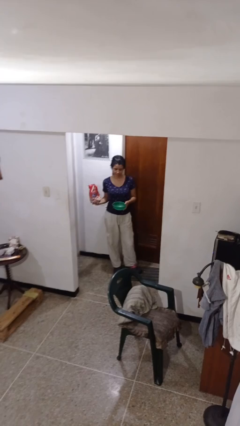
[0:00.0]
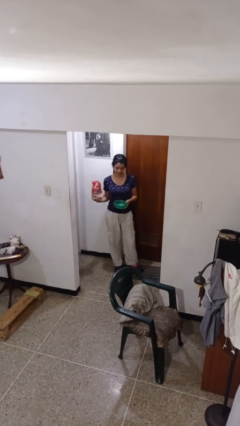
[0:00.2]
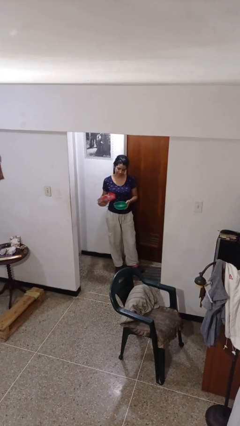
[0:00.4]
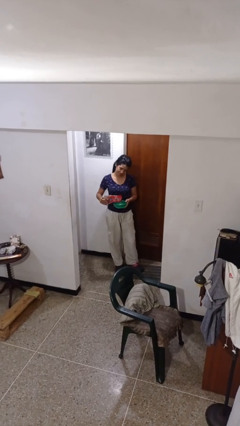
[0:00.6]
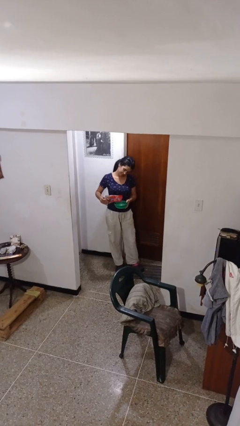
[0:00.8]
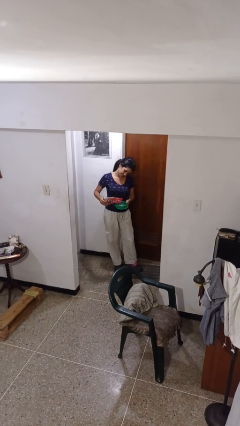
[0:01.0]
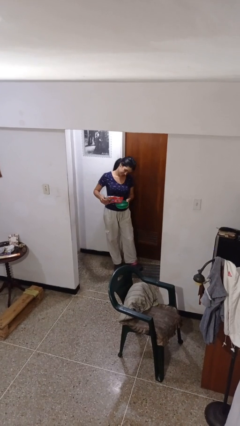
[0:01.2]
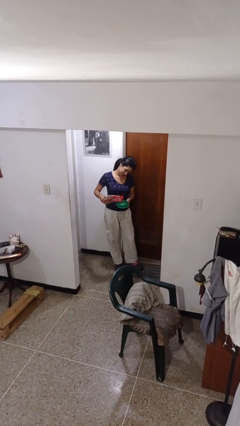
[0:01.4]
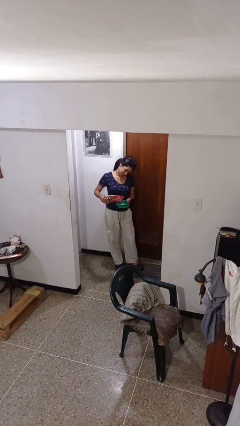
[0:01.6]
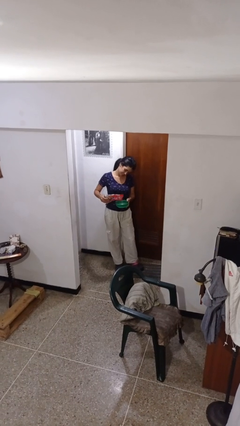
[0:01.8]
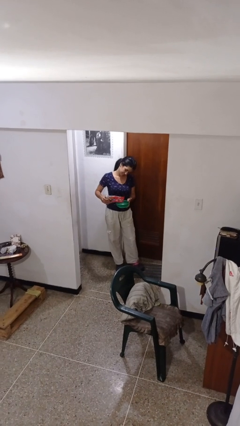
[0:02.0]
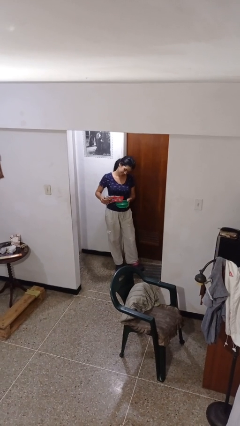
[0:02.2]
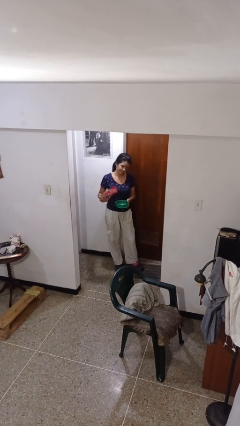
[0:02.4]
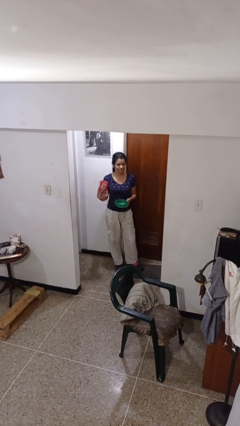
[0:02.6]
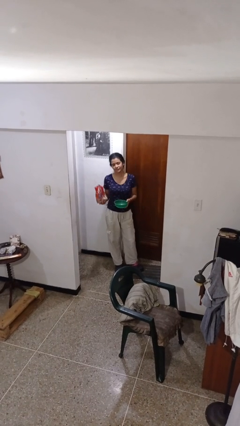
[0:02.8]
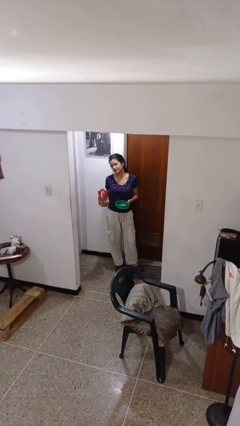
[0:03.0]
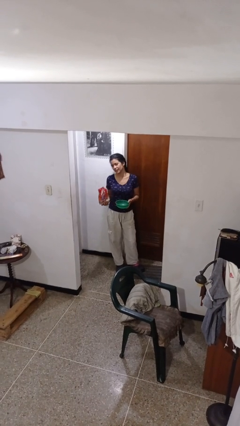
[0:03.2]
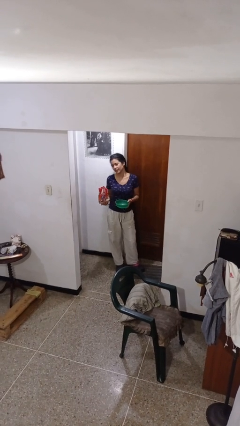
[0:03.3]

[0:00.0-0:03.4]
person pours into bowl

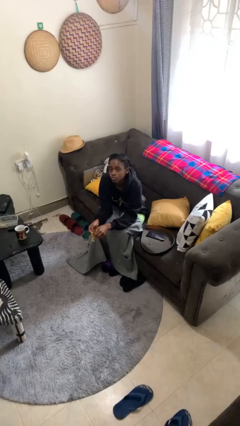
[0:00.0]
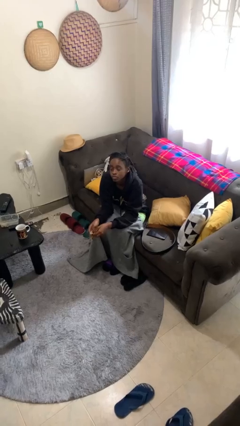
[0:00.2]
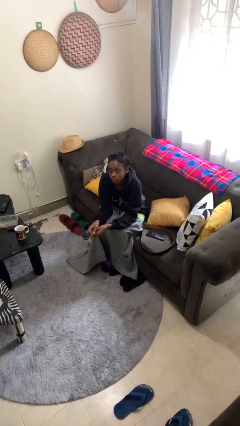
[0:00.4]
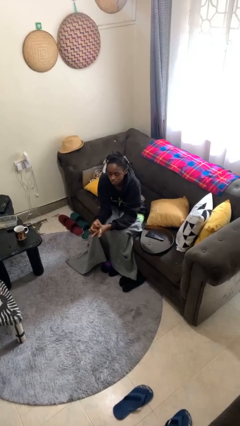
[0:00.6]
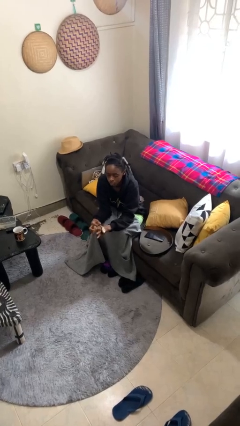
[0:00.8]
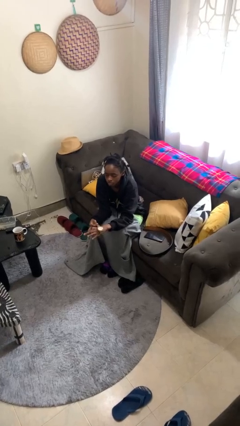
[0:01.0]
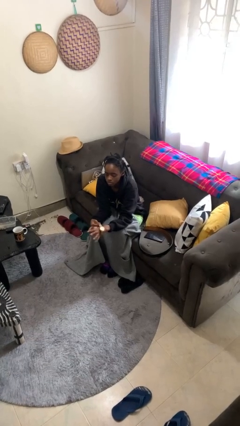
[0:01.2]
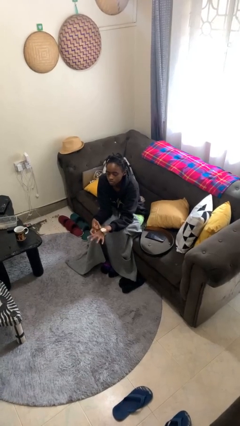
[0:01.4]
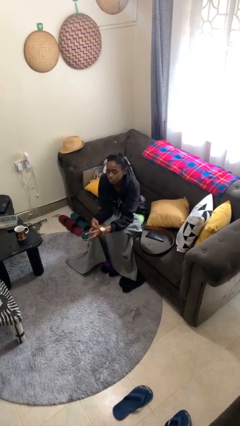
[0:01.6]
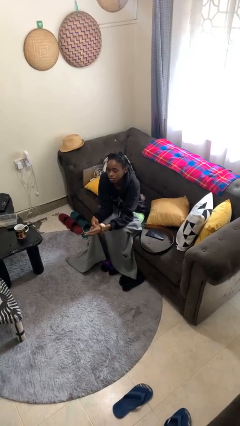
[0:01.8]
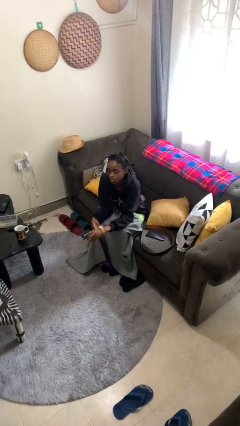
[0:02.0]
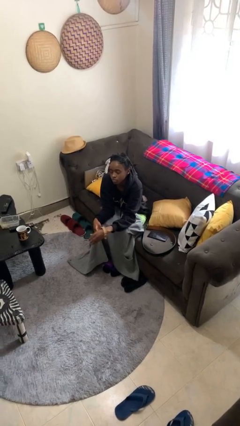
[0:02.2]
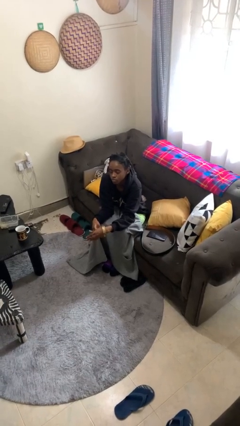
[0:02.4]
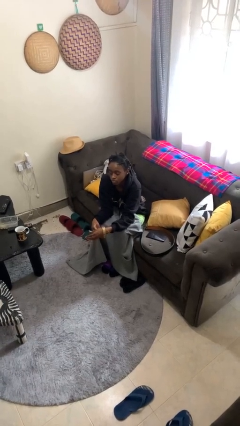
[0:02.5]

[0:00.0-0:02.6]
person puts on wristwatch

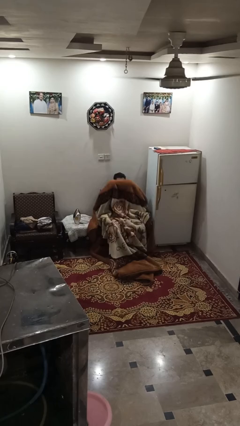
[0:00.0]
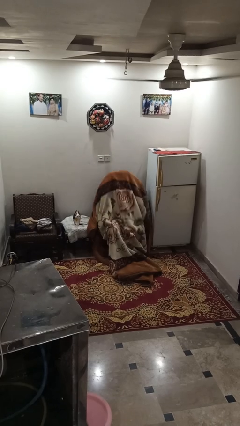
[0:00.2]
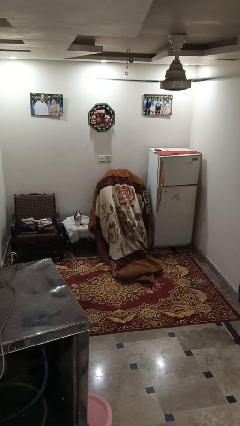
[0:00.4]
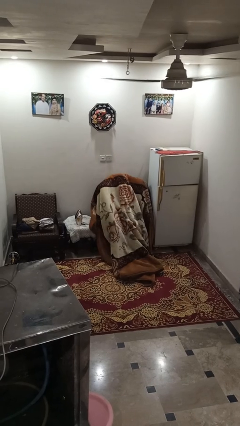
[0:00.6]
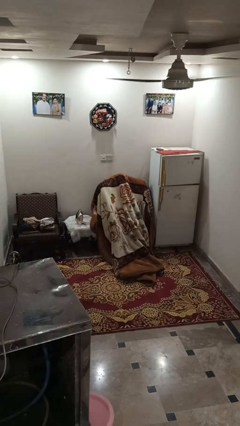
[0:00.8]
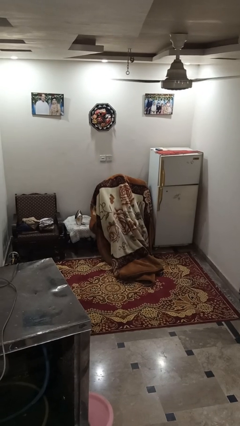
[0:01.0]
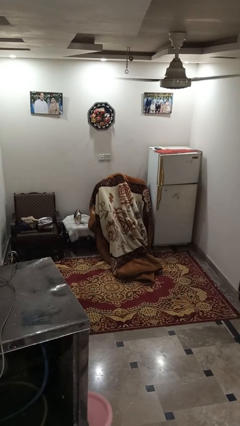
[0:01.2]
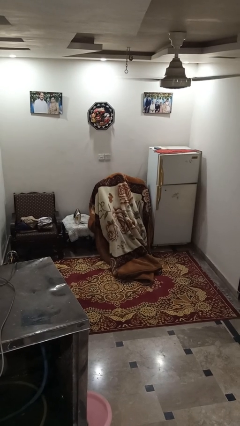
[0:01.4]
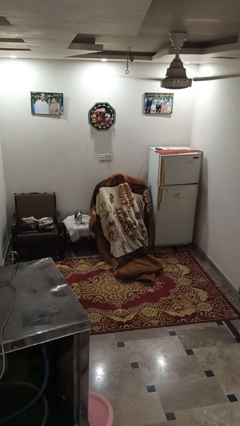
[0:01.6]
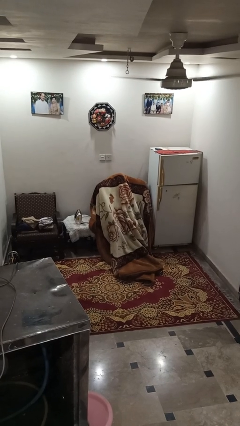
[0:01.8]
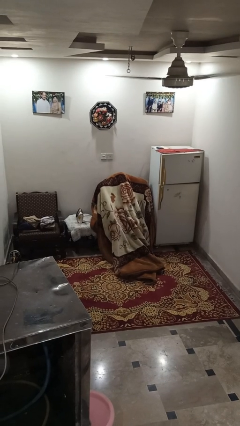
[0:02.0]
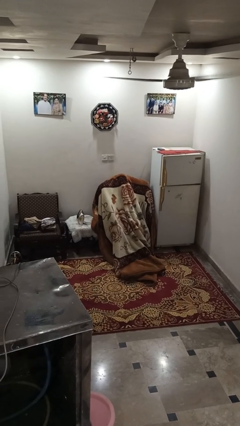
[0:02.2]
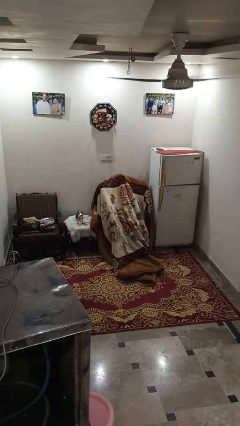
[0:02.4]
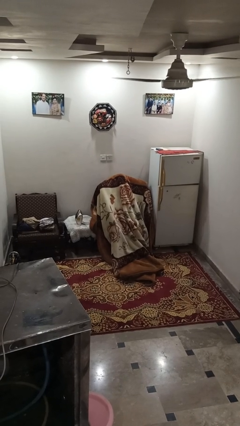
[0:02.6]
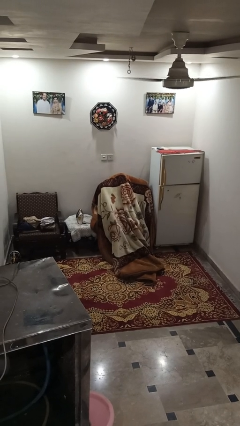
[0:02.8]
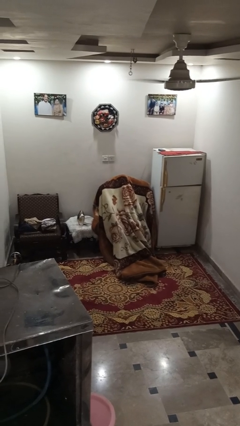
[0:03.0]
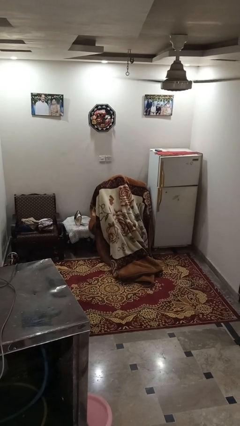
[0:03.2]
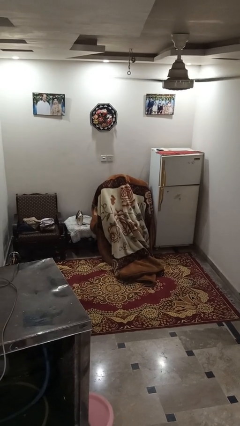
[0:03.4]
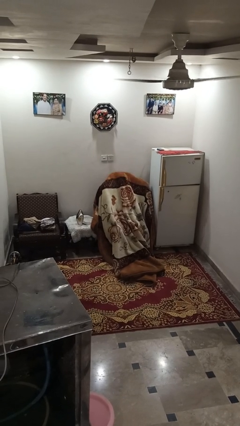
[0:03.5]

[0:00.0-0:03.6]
person covers with blanket

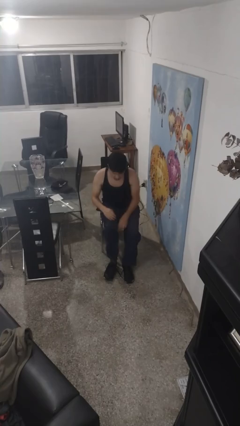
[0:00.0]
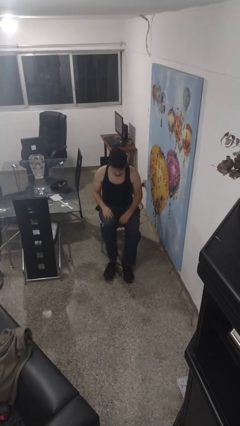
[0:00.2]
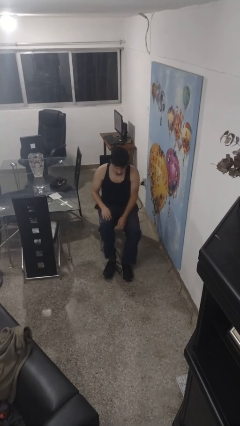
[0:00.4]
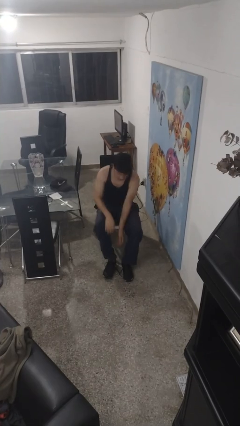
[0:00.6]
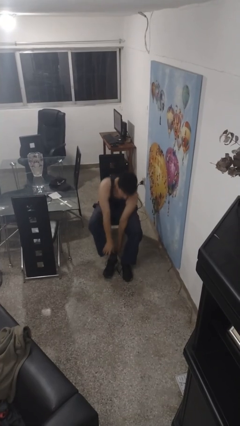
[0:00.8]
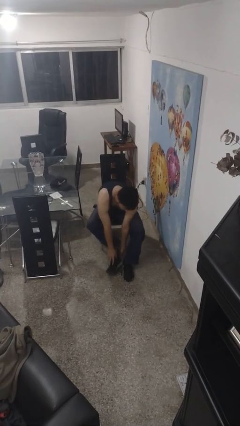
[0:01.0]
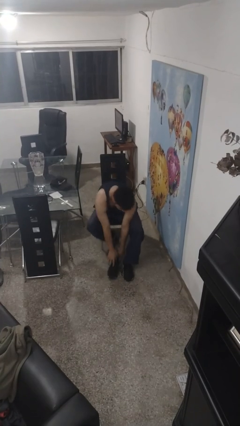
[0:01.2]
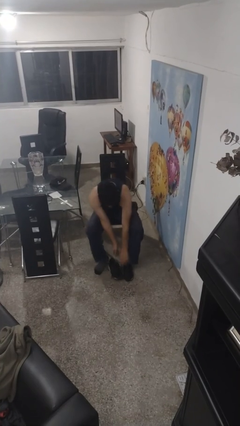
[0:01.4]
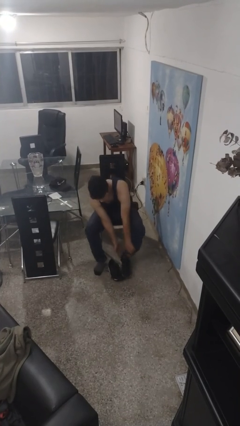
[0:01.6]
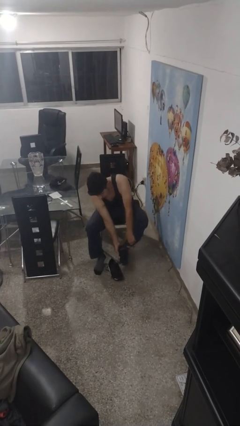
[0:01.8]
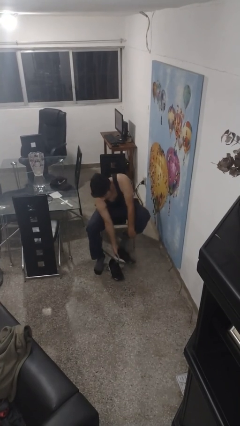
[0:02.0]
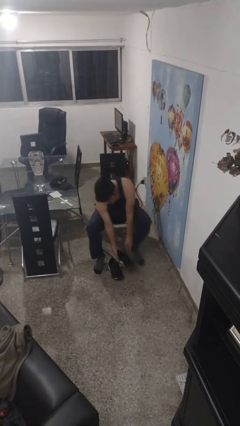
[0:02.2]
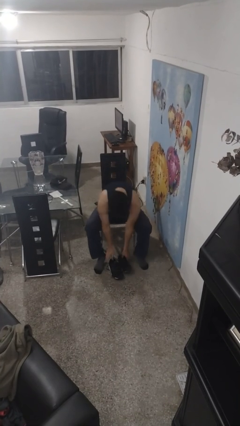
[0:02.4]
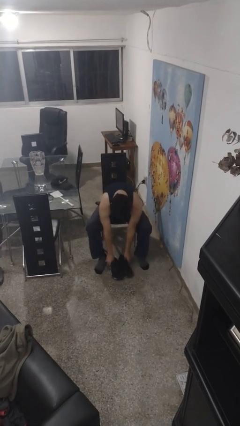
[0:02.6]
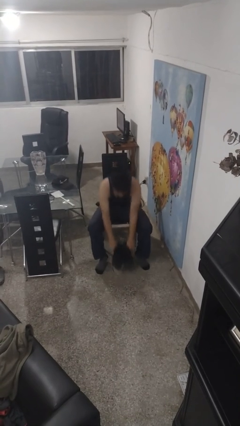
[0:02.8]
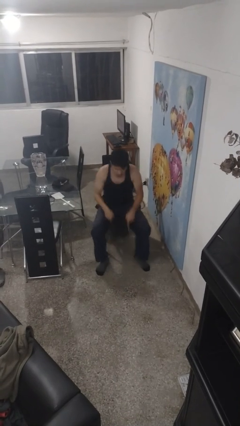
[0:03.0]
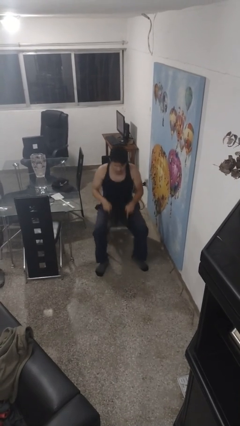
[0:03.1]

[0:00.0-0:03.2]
person takes off shoes

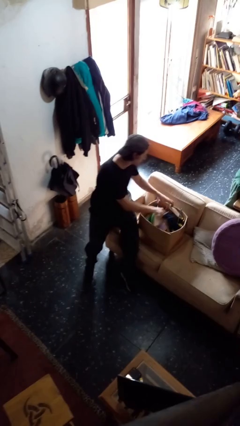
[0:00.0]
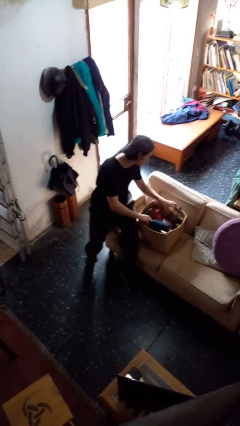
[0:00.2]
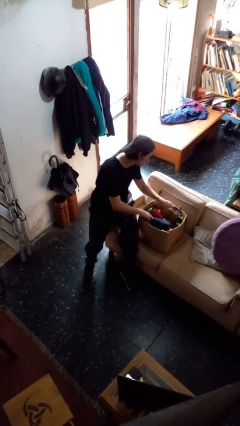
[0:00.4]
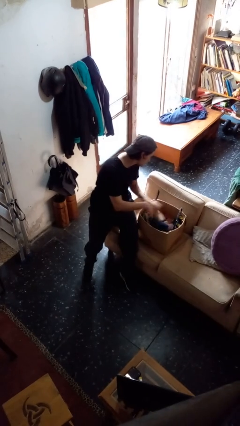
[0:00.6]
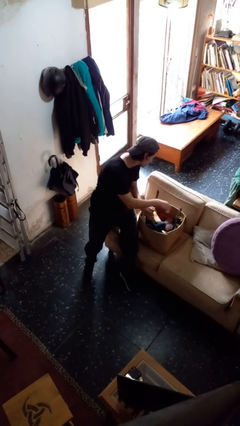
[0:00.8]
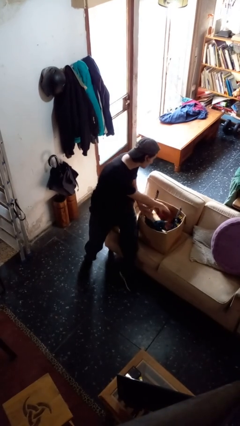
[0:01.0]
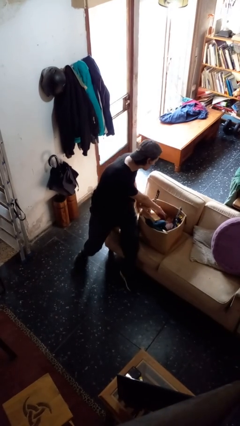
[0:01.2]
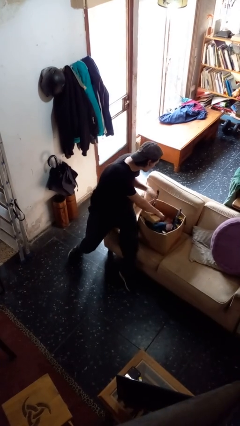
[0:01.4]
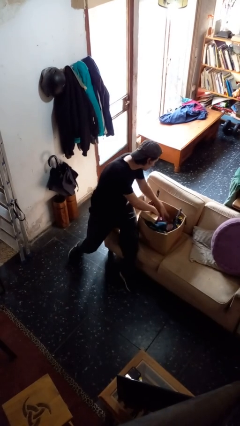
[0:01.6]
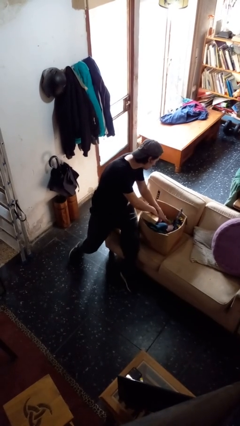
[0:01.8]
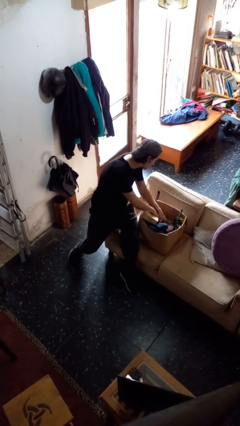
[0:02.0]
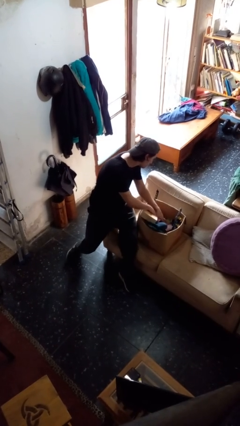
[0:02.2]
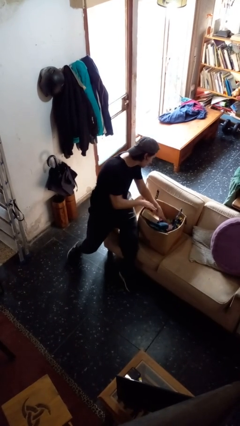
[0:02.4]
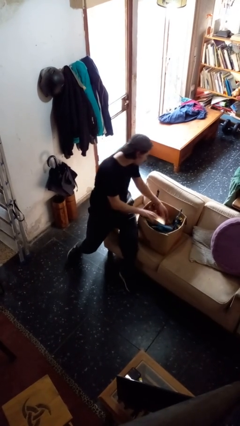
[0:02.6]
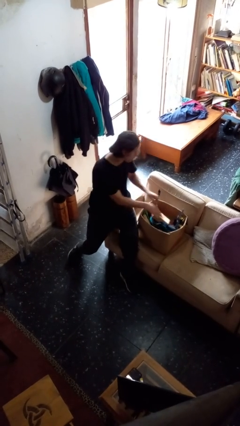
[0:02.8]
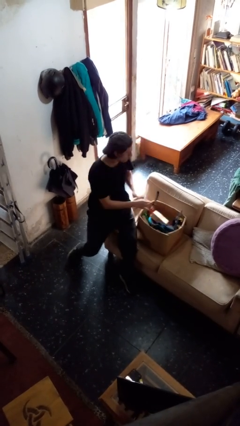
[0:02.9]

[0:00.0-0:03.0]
person searches in box

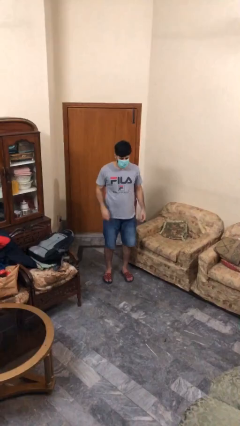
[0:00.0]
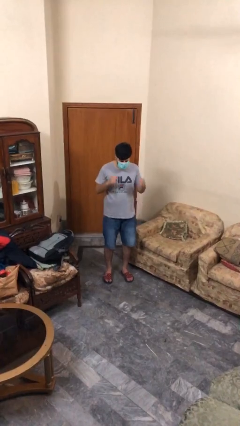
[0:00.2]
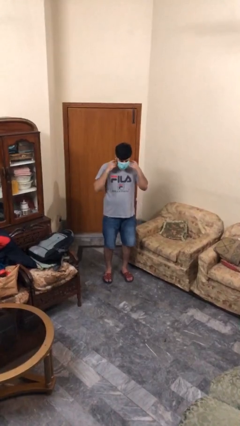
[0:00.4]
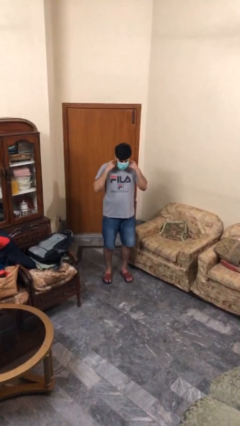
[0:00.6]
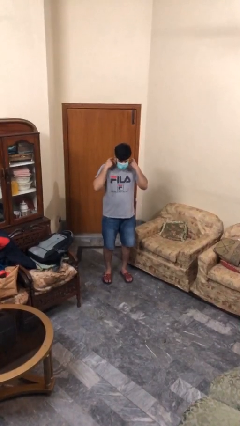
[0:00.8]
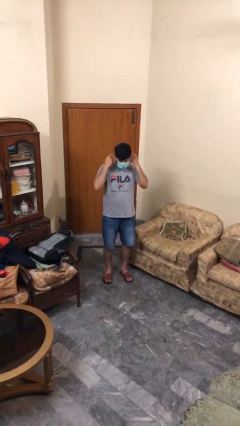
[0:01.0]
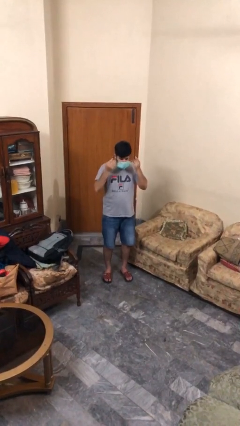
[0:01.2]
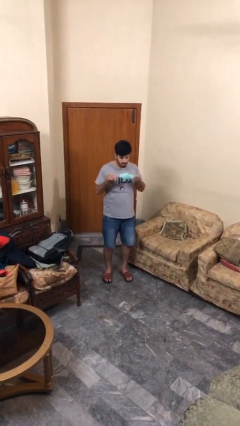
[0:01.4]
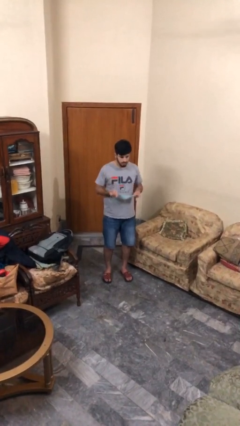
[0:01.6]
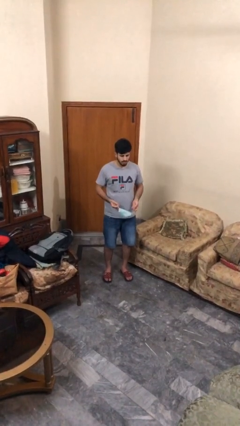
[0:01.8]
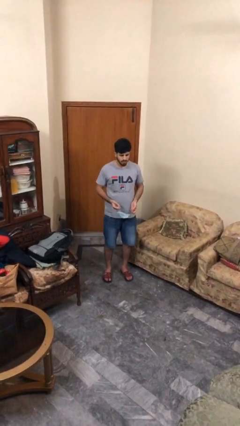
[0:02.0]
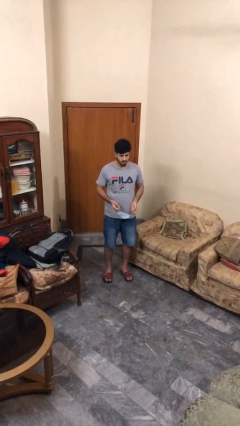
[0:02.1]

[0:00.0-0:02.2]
person takes off facemask
